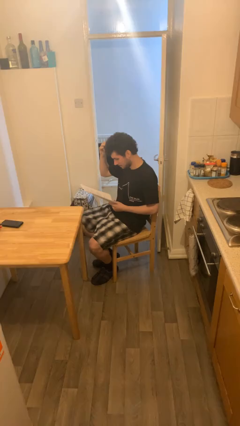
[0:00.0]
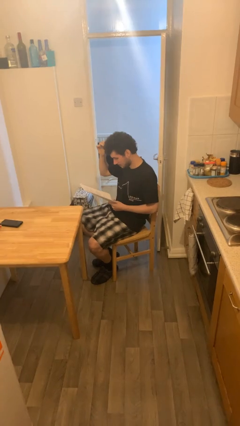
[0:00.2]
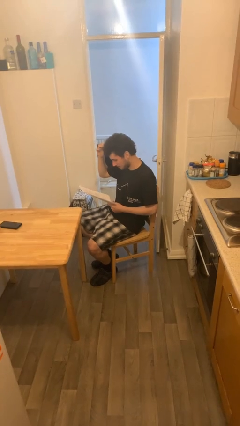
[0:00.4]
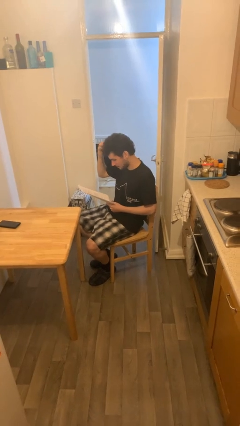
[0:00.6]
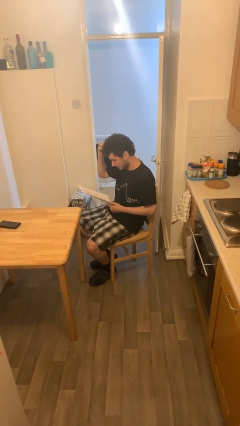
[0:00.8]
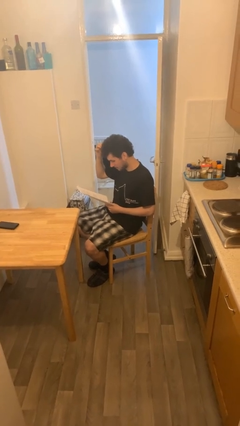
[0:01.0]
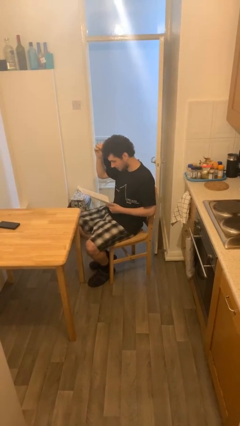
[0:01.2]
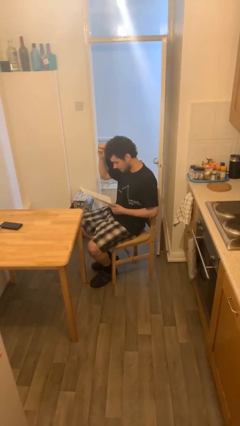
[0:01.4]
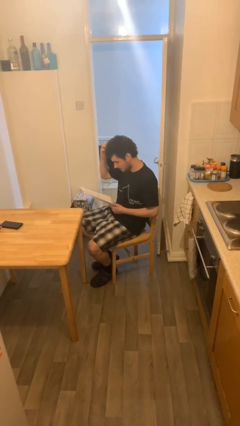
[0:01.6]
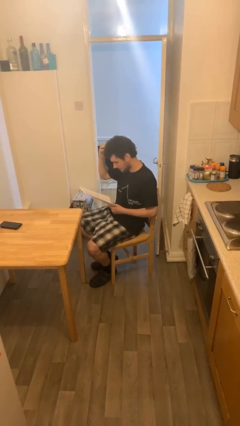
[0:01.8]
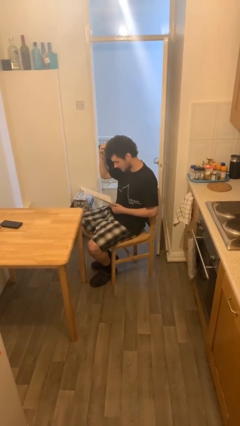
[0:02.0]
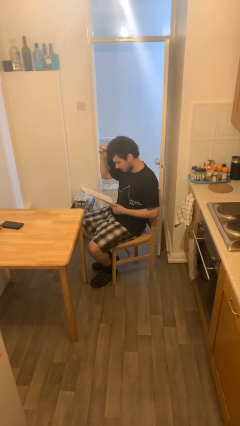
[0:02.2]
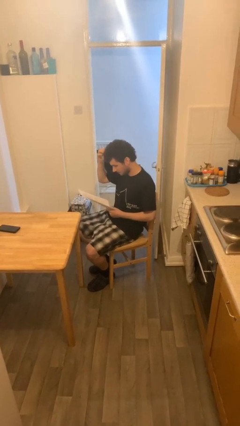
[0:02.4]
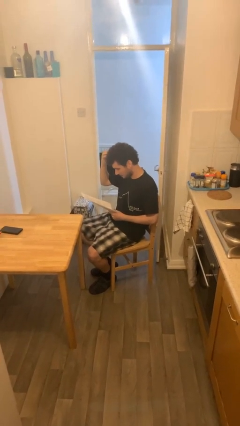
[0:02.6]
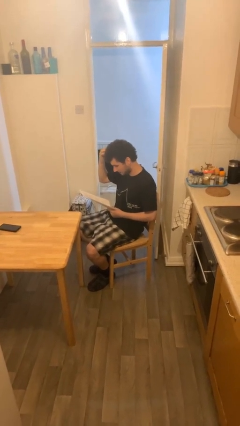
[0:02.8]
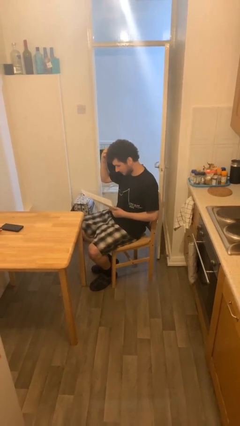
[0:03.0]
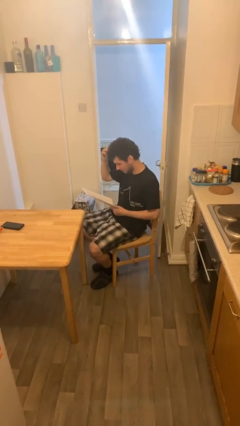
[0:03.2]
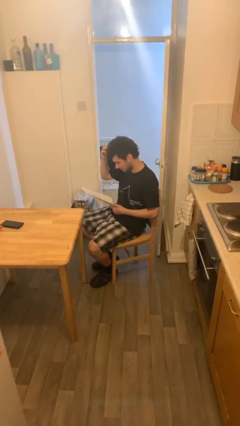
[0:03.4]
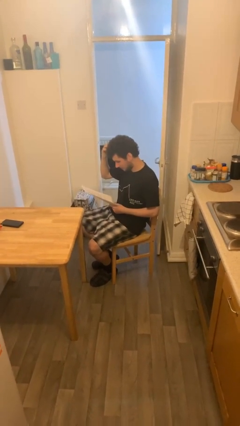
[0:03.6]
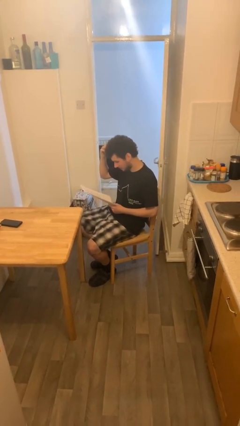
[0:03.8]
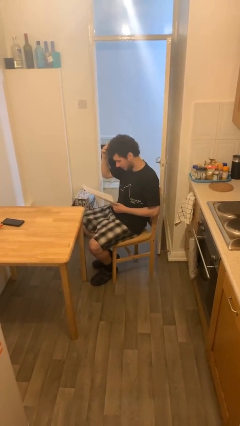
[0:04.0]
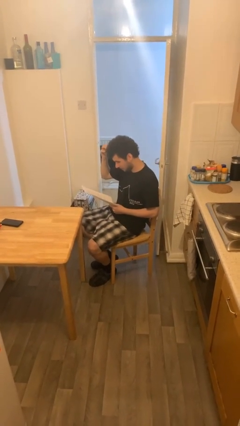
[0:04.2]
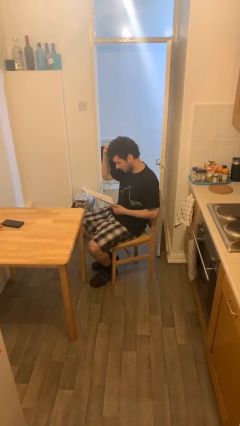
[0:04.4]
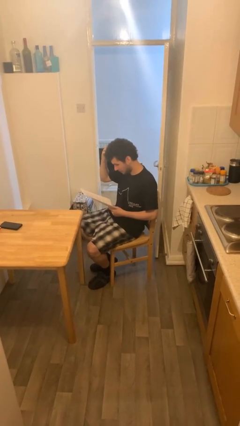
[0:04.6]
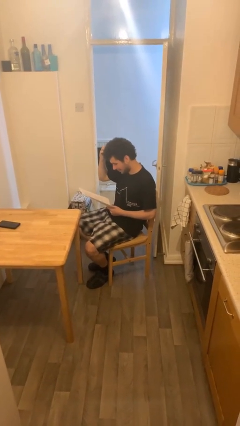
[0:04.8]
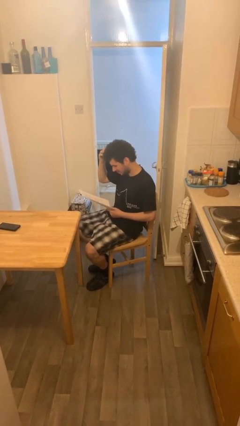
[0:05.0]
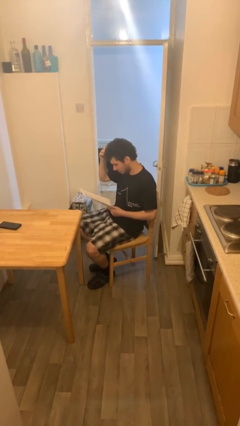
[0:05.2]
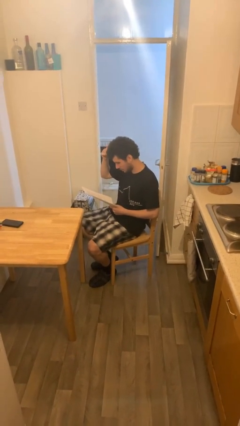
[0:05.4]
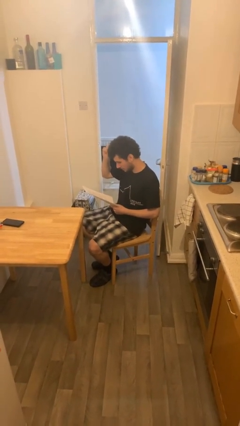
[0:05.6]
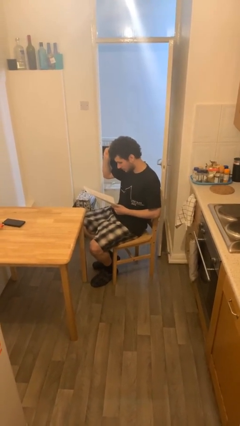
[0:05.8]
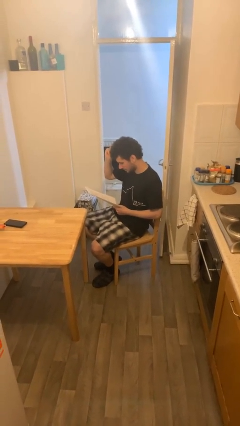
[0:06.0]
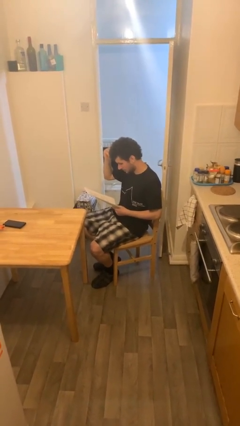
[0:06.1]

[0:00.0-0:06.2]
person reads document

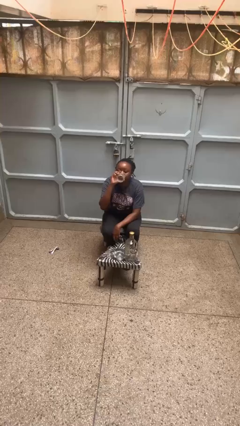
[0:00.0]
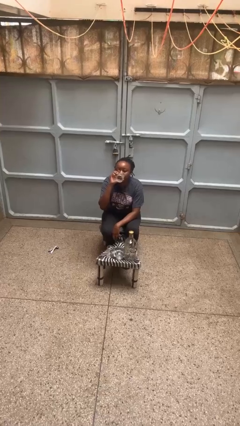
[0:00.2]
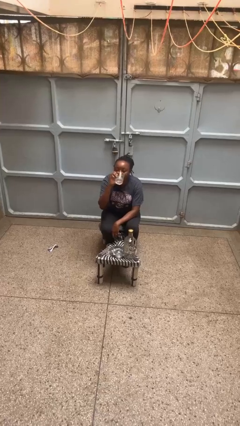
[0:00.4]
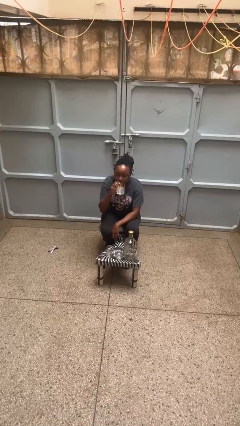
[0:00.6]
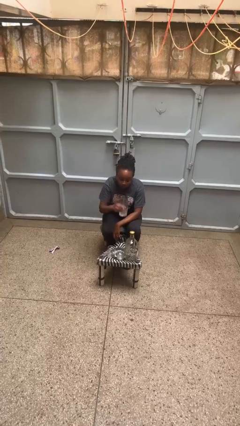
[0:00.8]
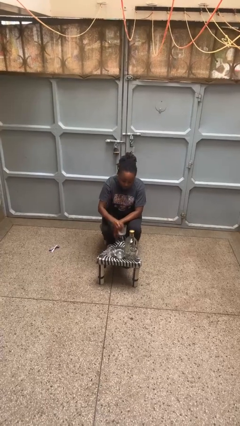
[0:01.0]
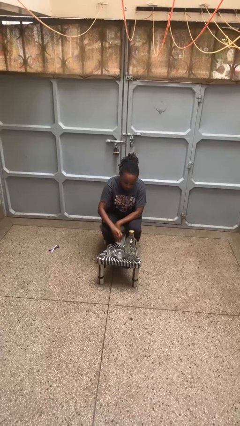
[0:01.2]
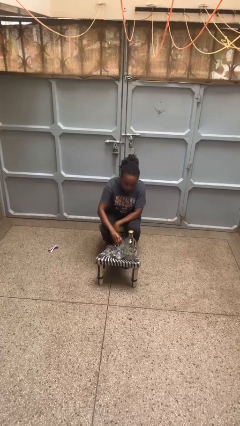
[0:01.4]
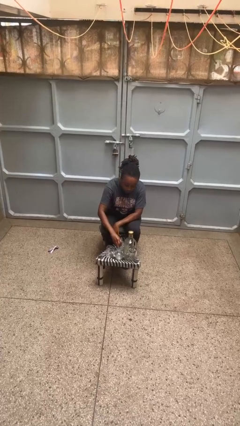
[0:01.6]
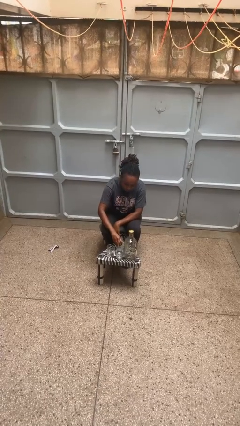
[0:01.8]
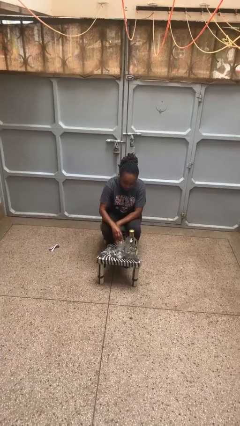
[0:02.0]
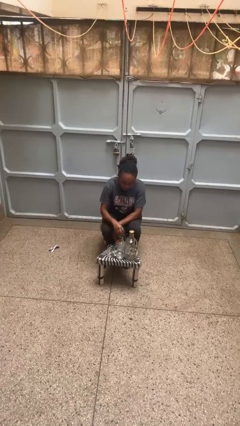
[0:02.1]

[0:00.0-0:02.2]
person puts down object on table

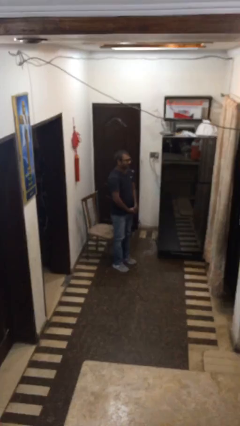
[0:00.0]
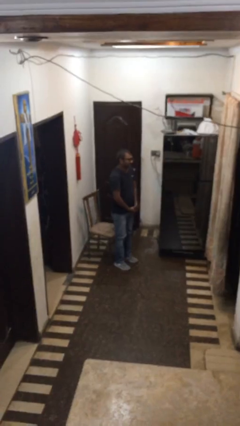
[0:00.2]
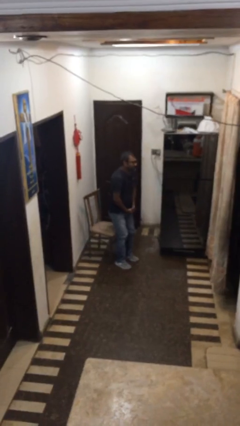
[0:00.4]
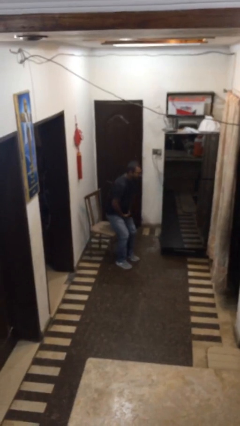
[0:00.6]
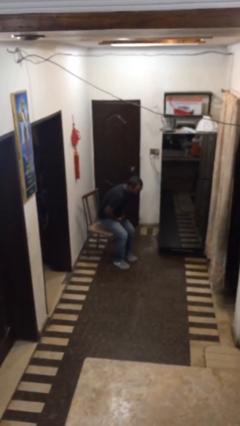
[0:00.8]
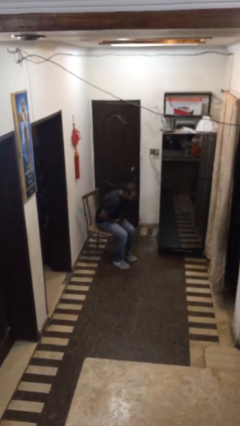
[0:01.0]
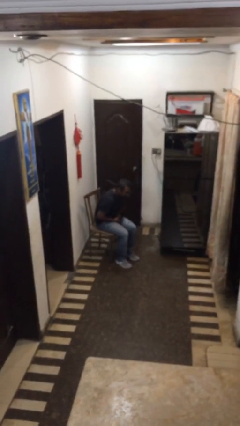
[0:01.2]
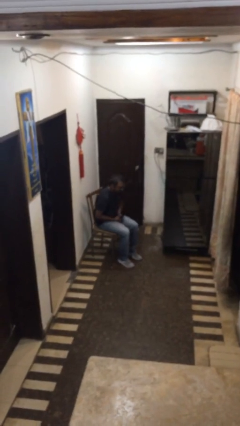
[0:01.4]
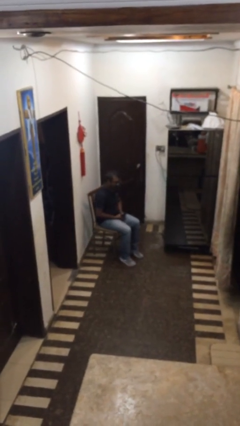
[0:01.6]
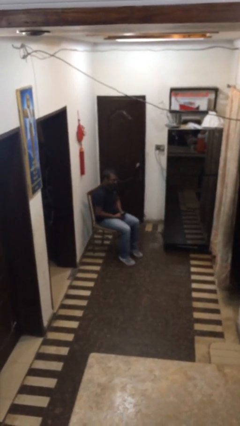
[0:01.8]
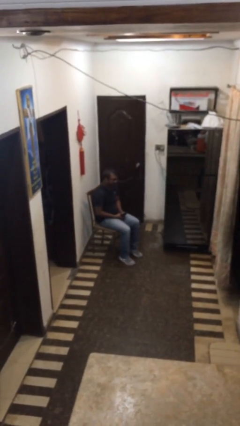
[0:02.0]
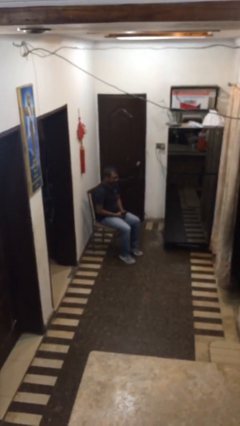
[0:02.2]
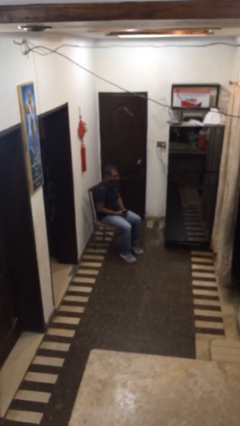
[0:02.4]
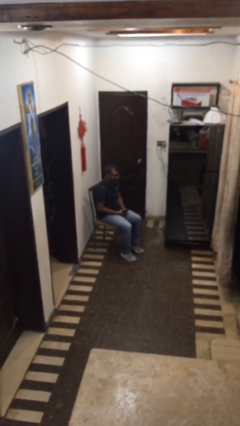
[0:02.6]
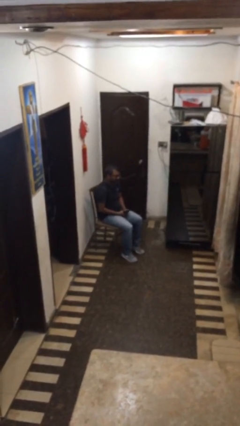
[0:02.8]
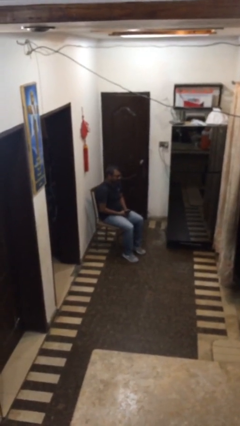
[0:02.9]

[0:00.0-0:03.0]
person sits down

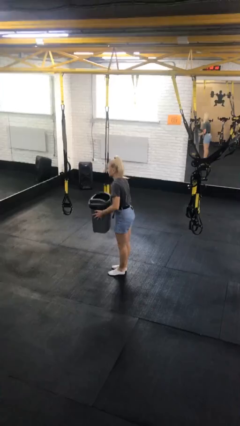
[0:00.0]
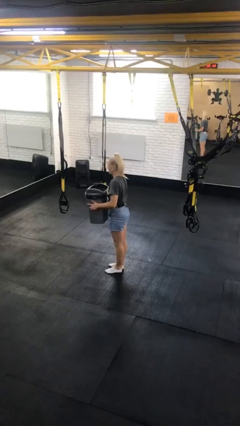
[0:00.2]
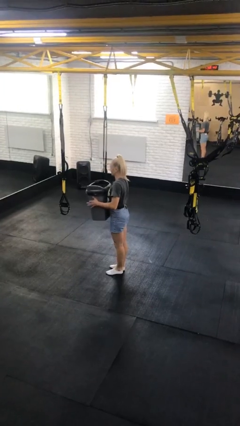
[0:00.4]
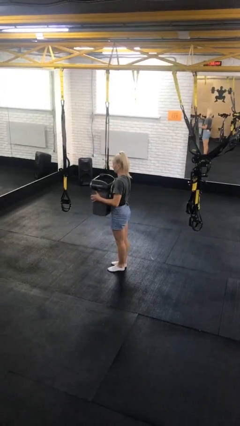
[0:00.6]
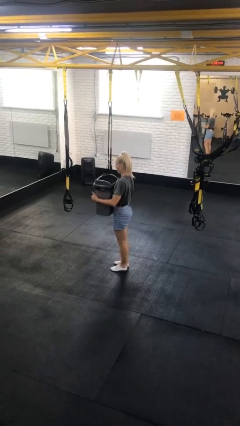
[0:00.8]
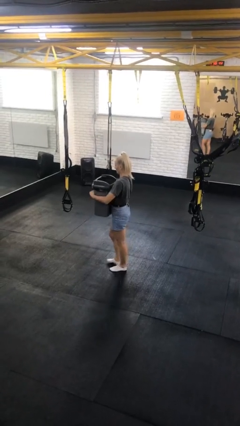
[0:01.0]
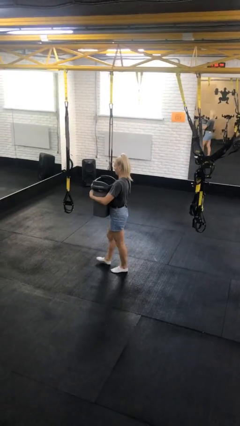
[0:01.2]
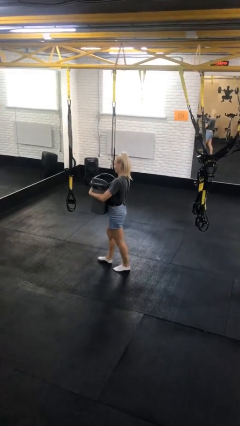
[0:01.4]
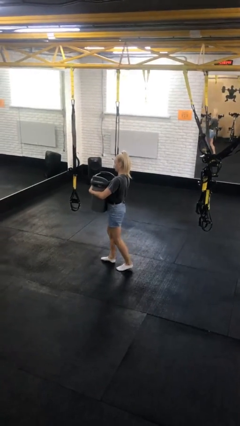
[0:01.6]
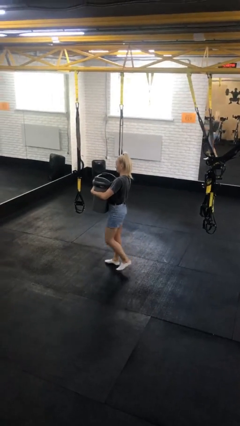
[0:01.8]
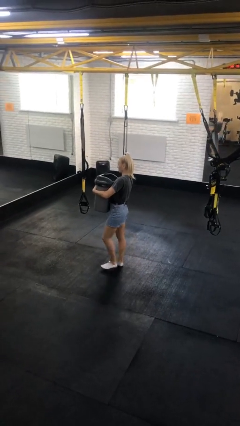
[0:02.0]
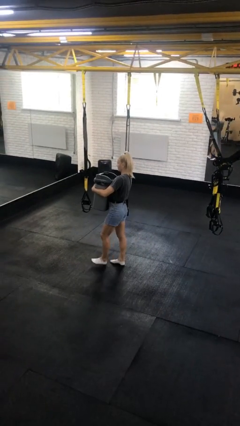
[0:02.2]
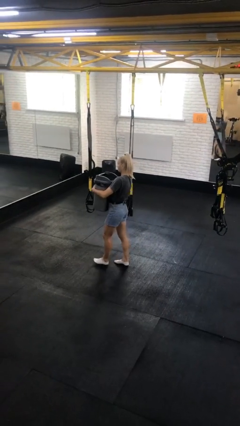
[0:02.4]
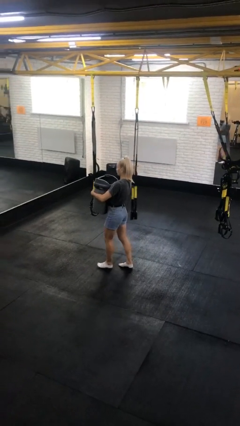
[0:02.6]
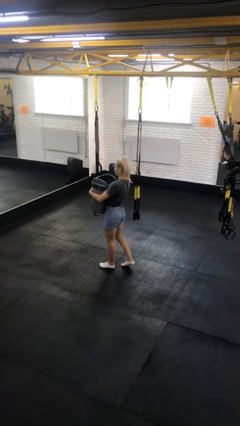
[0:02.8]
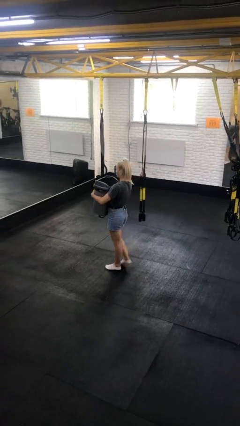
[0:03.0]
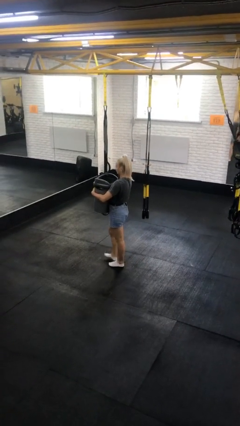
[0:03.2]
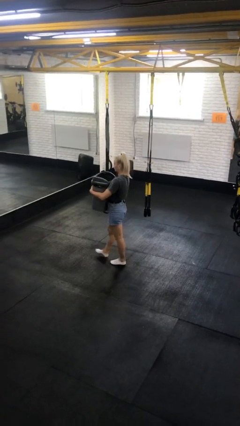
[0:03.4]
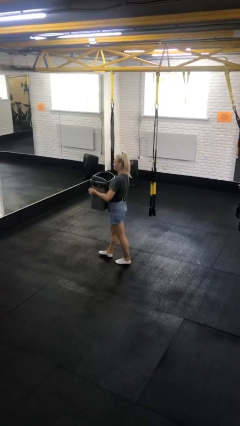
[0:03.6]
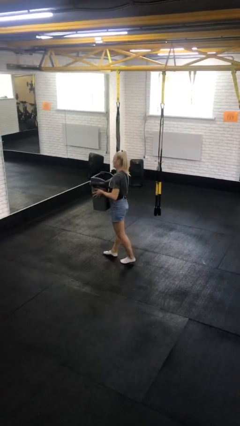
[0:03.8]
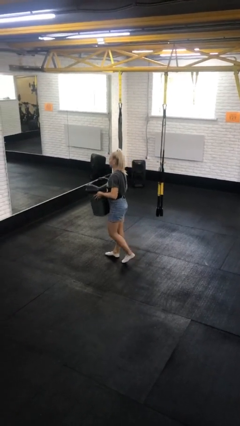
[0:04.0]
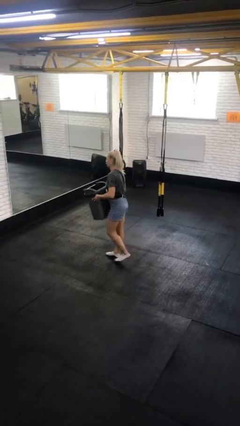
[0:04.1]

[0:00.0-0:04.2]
person carries heavy object

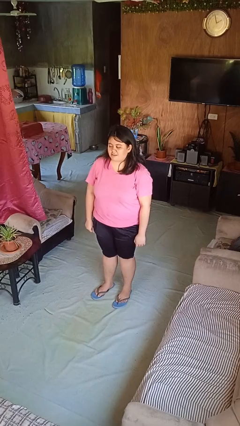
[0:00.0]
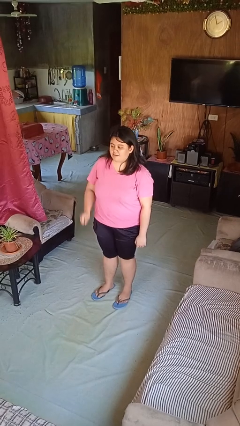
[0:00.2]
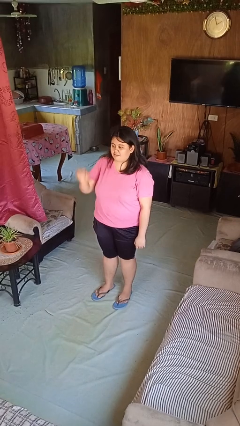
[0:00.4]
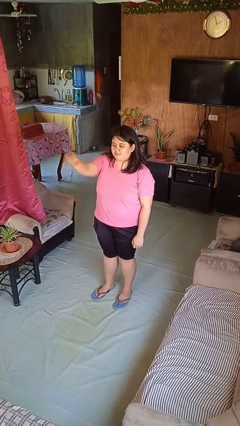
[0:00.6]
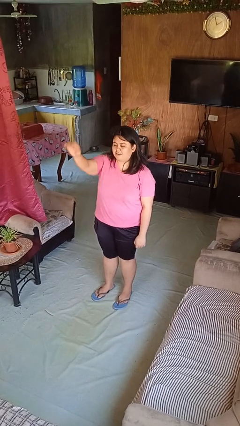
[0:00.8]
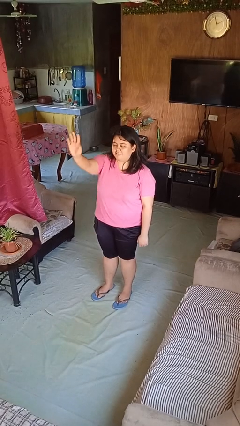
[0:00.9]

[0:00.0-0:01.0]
person gestures come here

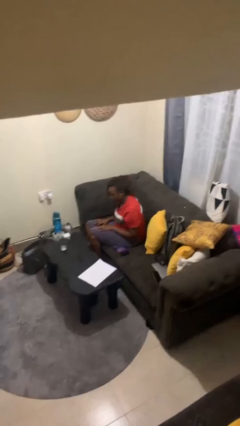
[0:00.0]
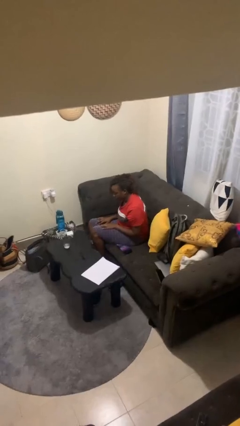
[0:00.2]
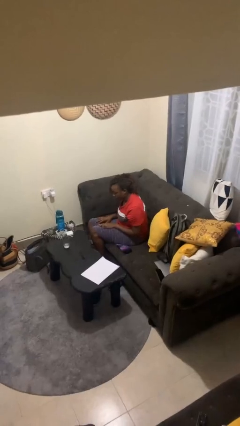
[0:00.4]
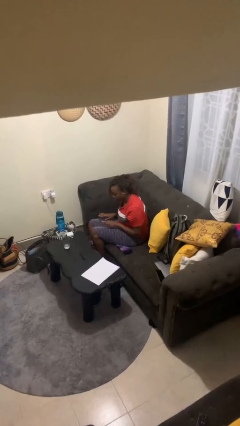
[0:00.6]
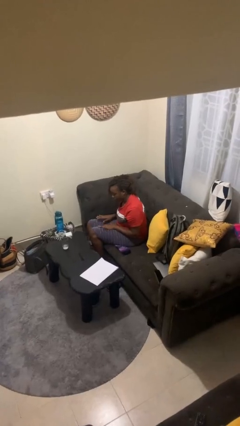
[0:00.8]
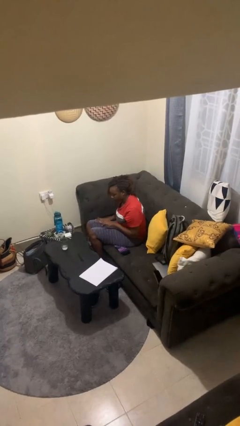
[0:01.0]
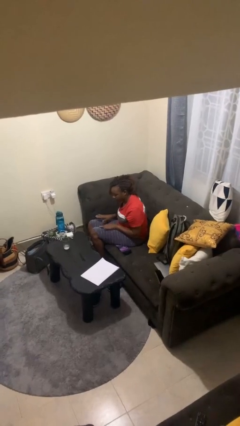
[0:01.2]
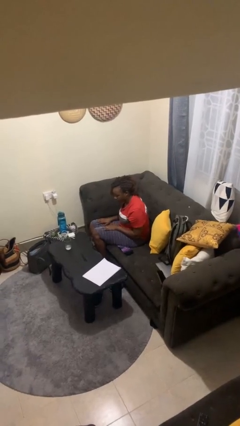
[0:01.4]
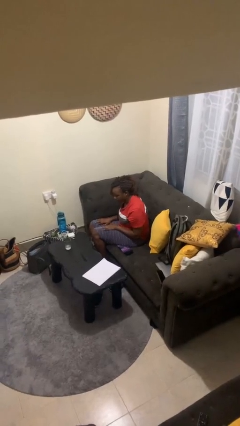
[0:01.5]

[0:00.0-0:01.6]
person slaps hands on thighs
